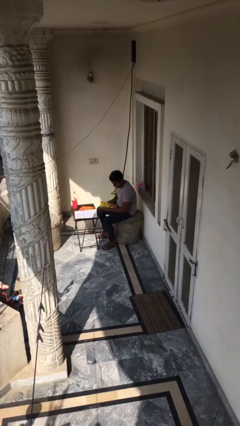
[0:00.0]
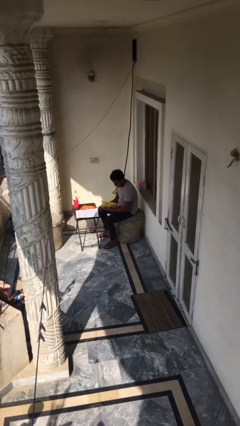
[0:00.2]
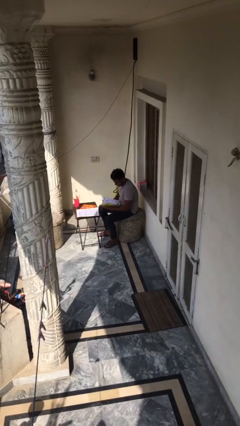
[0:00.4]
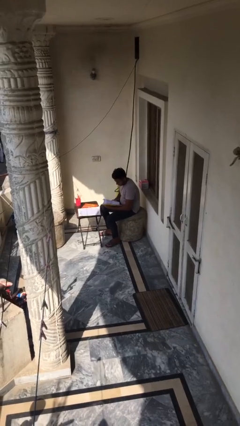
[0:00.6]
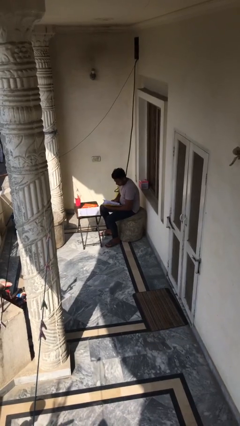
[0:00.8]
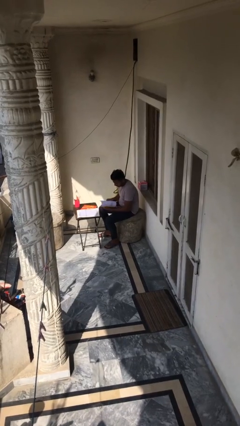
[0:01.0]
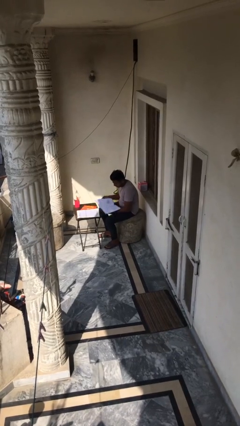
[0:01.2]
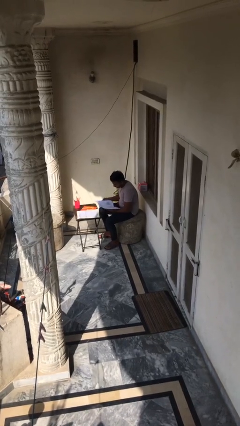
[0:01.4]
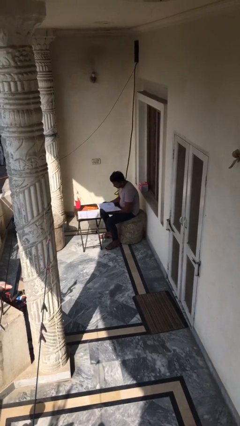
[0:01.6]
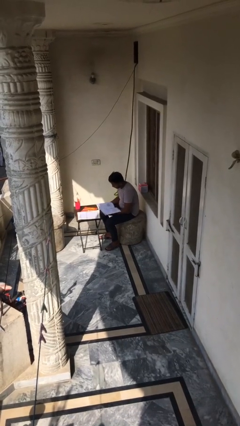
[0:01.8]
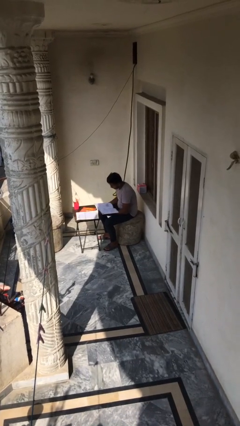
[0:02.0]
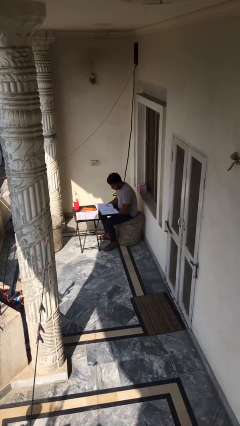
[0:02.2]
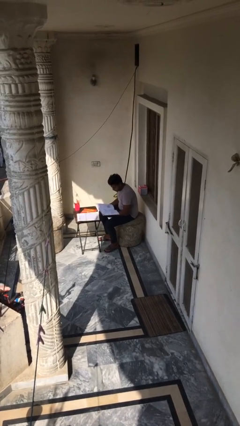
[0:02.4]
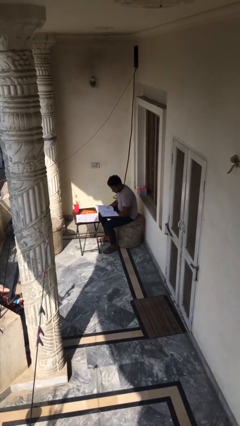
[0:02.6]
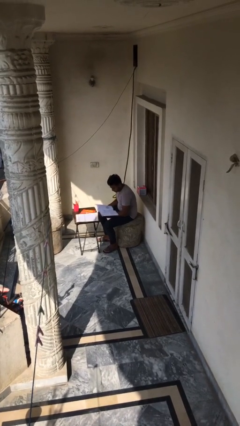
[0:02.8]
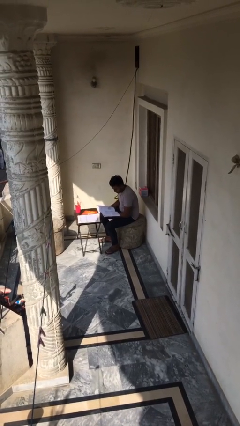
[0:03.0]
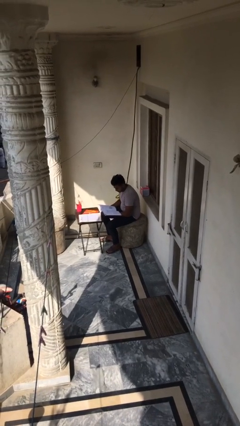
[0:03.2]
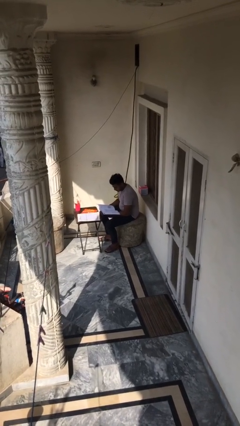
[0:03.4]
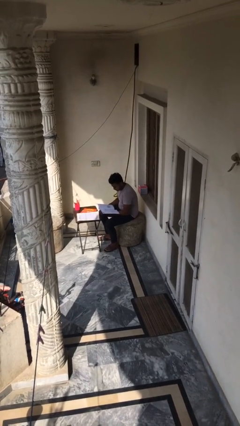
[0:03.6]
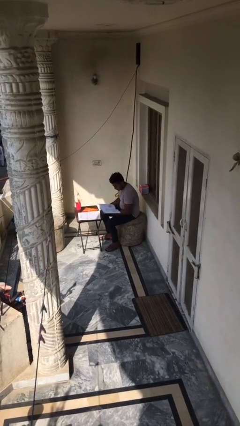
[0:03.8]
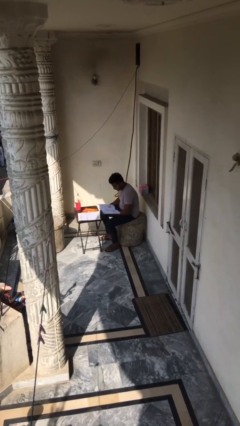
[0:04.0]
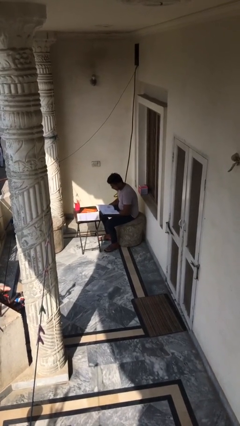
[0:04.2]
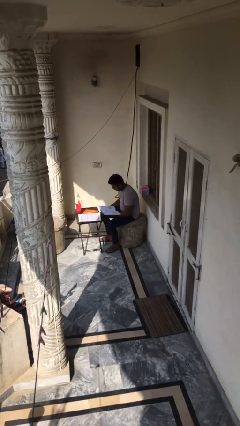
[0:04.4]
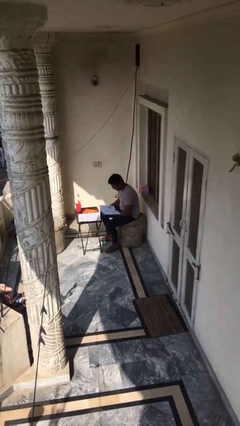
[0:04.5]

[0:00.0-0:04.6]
person reads document

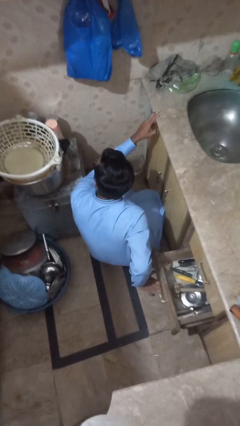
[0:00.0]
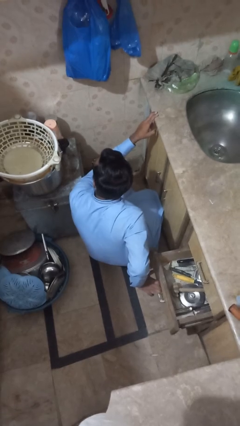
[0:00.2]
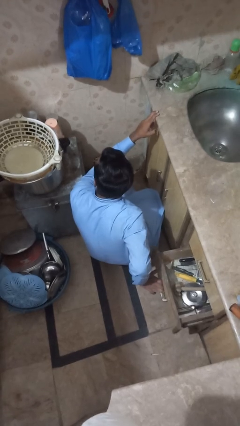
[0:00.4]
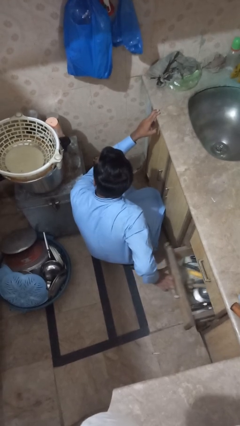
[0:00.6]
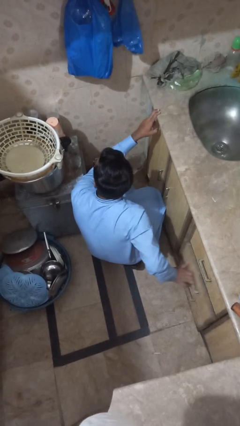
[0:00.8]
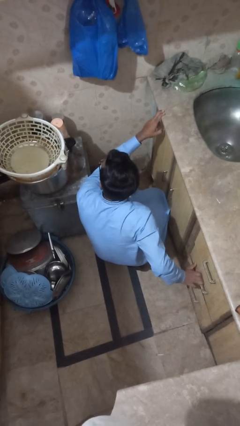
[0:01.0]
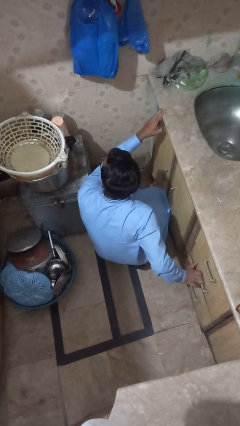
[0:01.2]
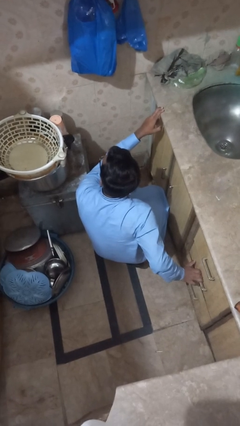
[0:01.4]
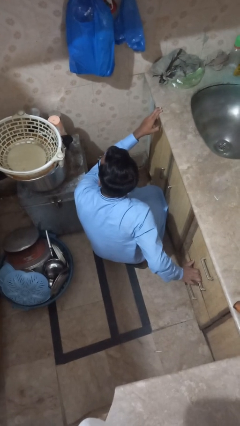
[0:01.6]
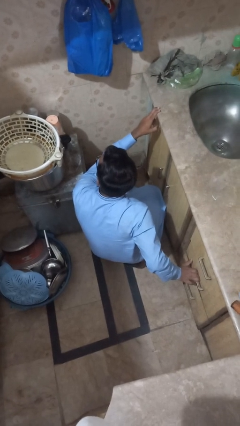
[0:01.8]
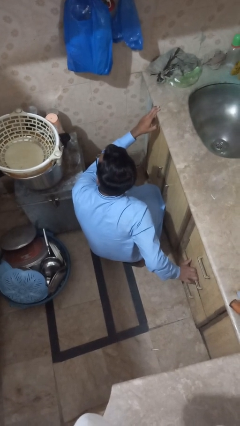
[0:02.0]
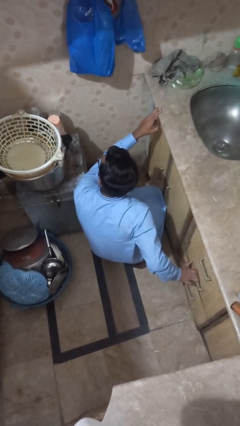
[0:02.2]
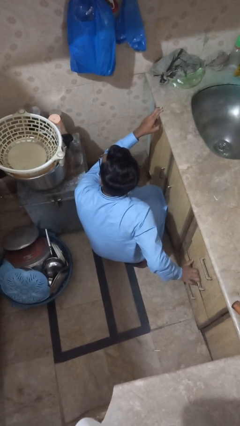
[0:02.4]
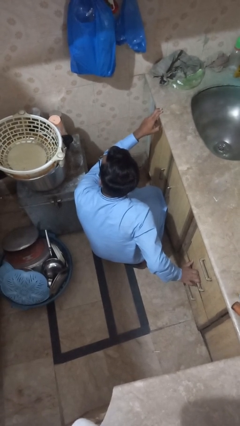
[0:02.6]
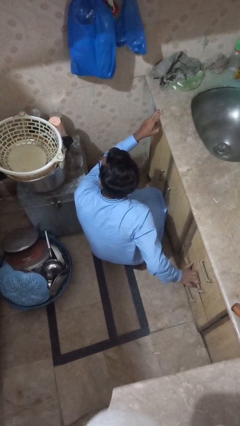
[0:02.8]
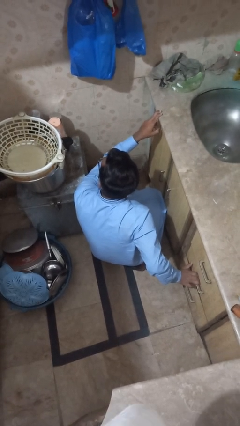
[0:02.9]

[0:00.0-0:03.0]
person closes kitchen drawer

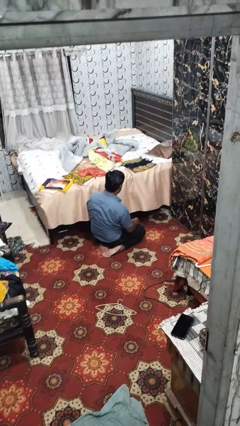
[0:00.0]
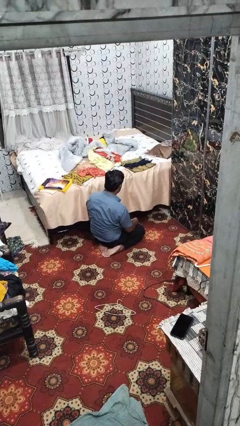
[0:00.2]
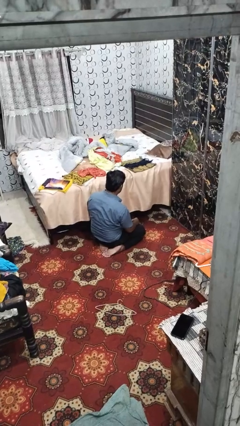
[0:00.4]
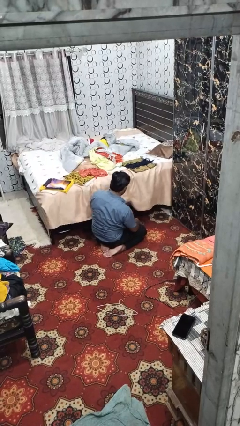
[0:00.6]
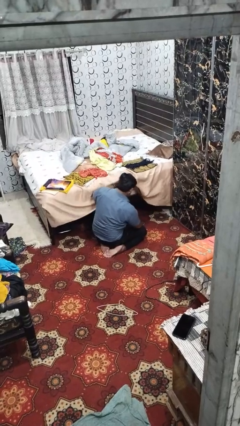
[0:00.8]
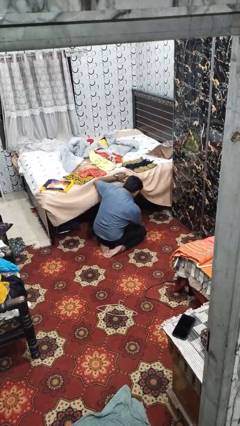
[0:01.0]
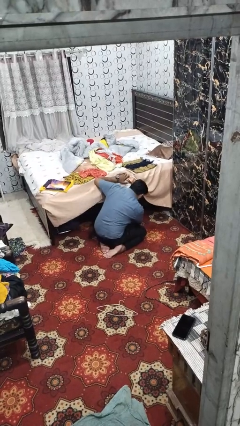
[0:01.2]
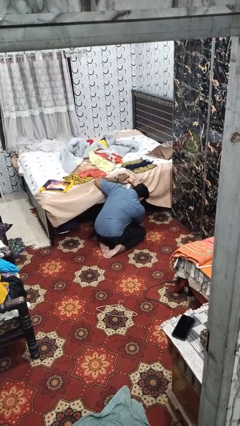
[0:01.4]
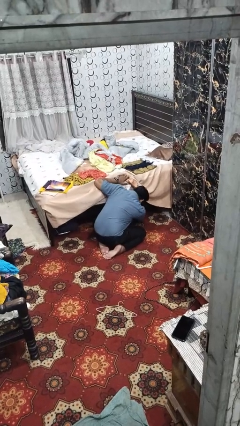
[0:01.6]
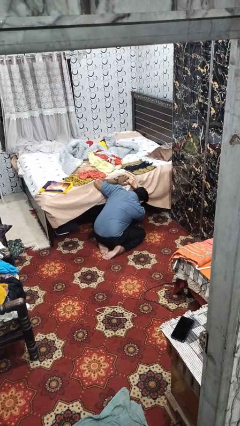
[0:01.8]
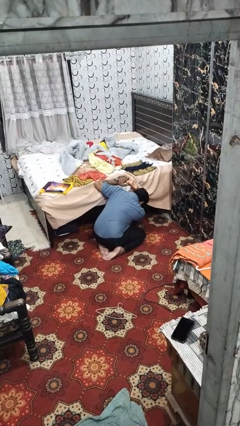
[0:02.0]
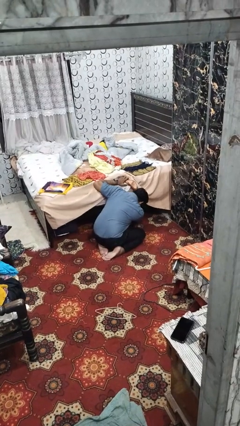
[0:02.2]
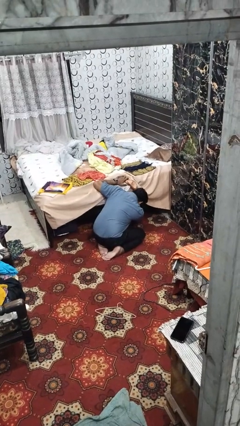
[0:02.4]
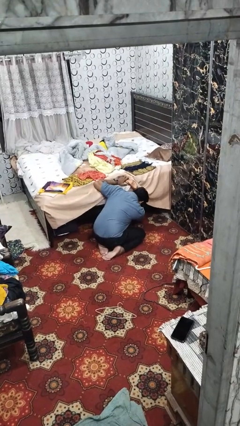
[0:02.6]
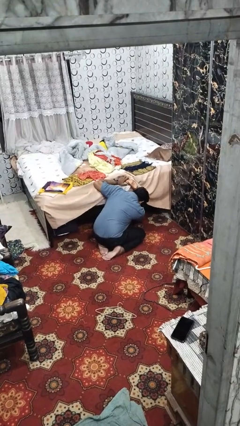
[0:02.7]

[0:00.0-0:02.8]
person searches under bed

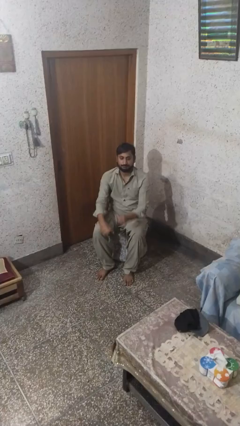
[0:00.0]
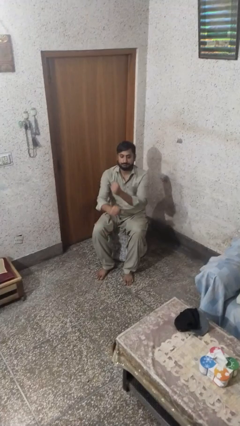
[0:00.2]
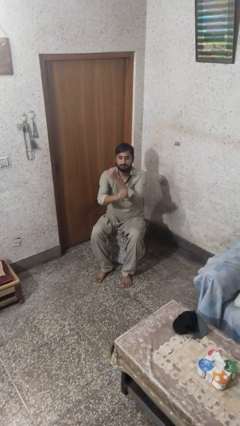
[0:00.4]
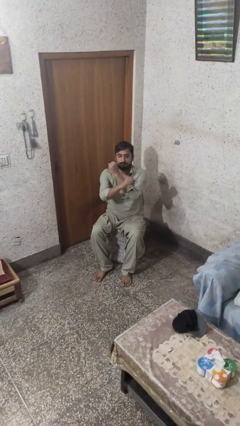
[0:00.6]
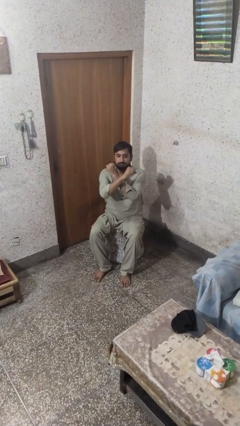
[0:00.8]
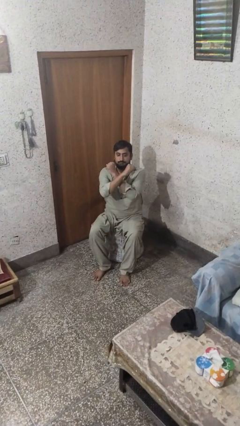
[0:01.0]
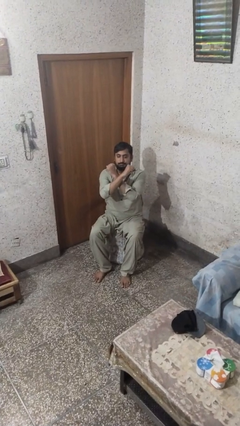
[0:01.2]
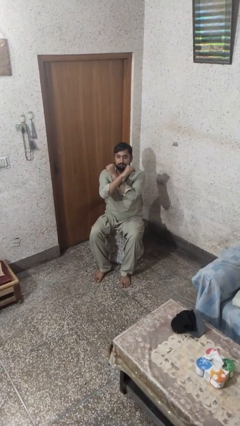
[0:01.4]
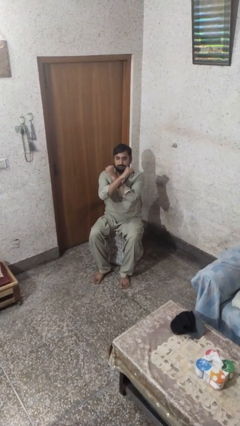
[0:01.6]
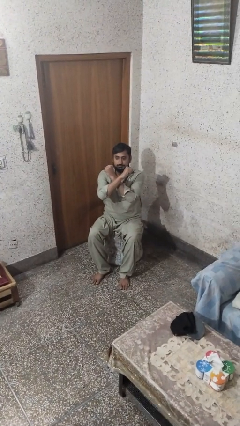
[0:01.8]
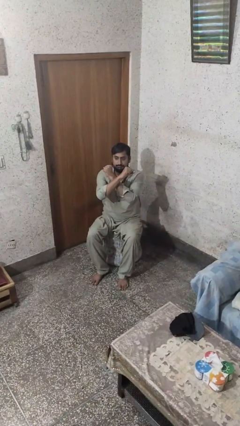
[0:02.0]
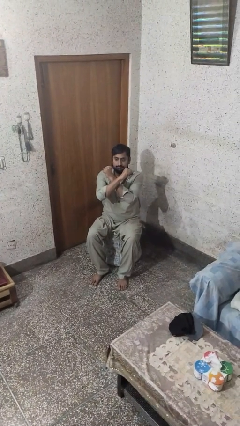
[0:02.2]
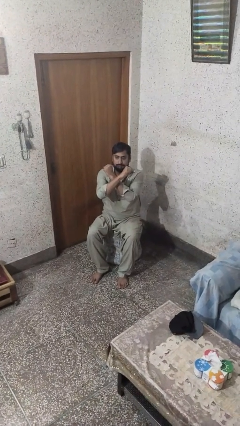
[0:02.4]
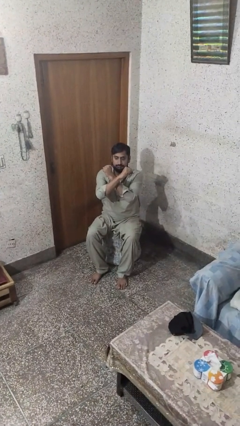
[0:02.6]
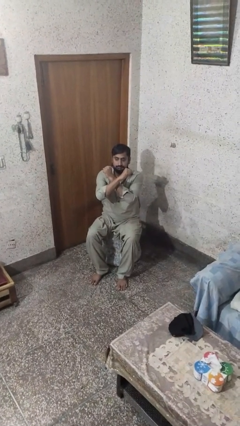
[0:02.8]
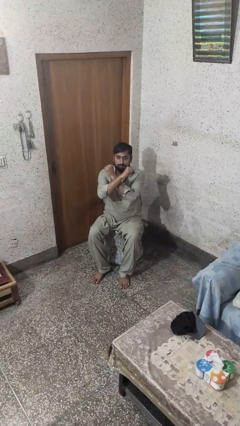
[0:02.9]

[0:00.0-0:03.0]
person gestures arms x

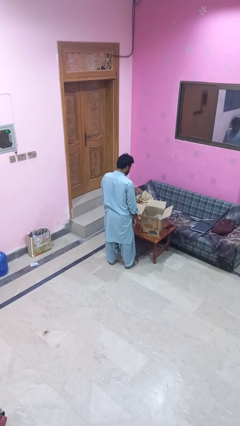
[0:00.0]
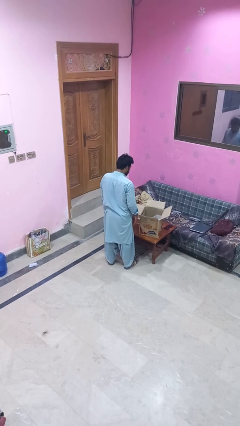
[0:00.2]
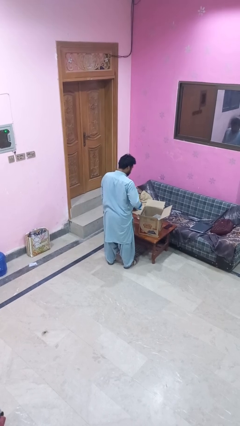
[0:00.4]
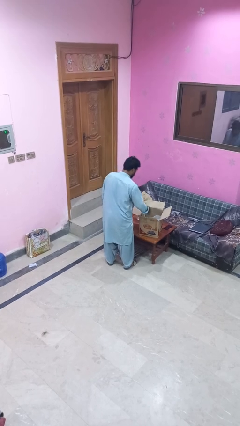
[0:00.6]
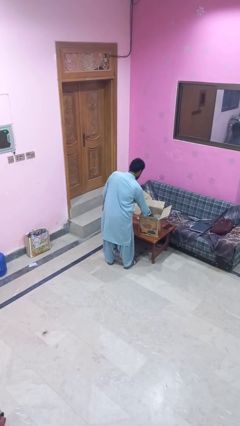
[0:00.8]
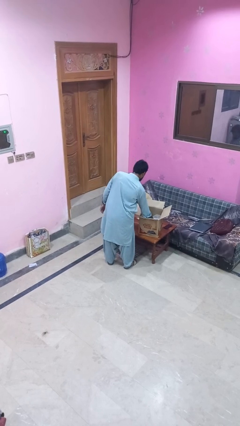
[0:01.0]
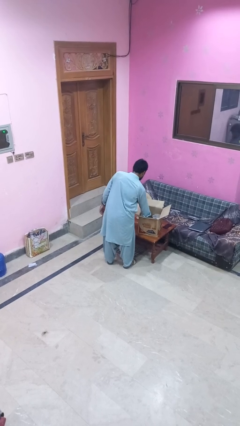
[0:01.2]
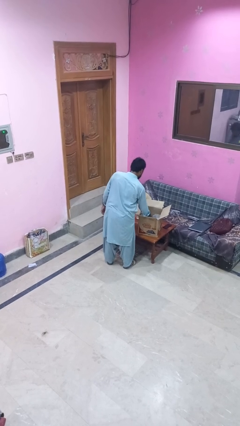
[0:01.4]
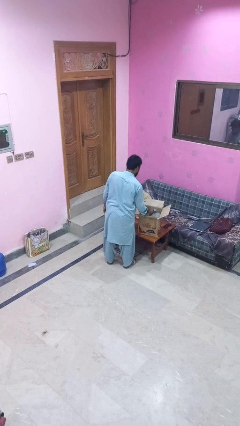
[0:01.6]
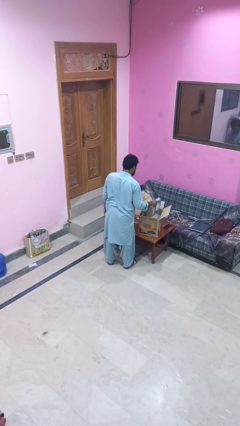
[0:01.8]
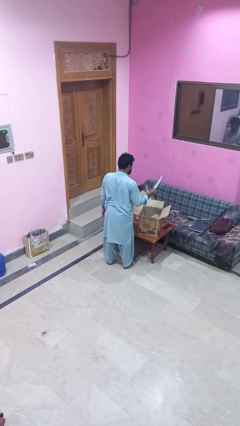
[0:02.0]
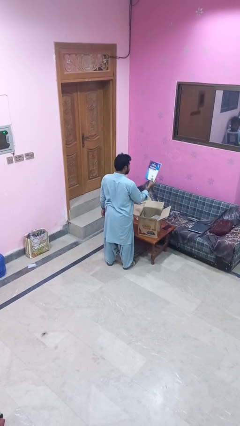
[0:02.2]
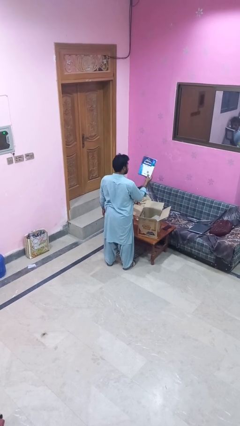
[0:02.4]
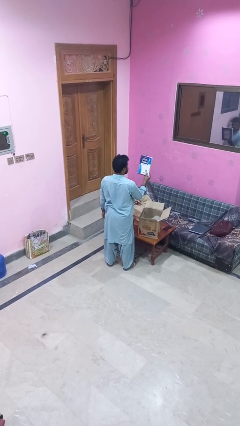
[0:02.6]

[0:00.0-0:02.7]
person takes object from box

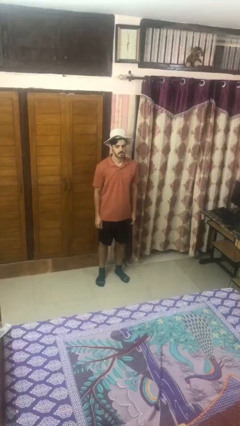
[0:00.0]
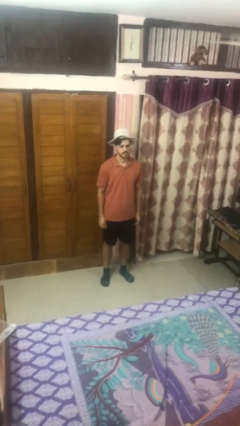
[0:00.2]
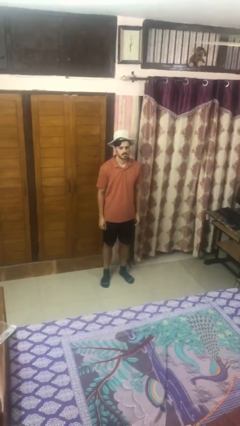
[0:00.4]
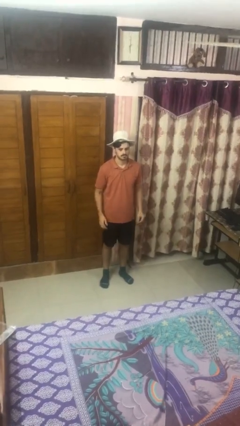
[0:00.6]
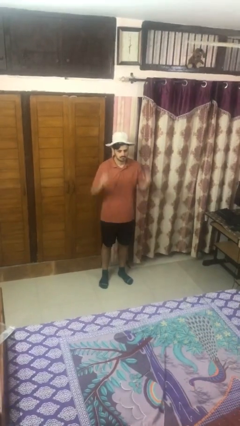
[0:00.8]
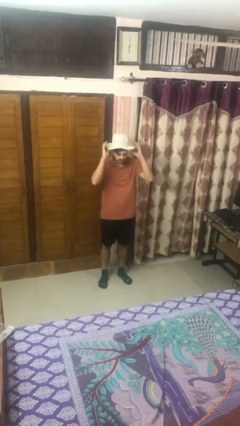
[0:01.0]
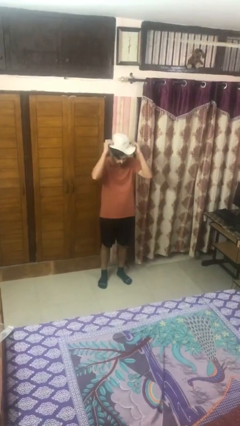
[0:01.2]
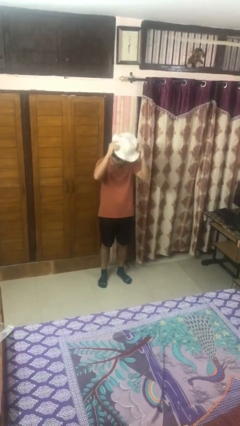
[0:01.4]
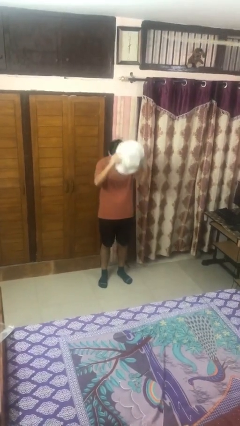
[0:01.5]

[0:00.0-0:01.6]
person takes off hat
